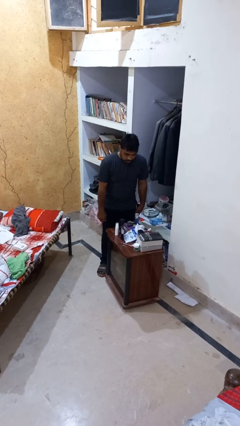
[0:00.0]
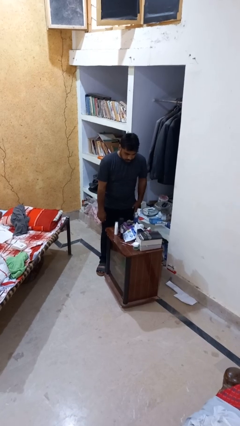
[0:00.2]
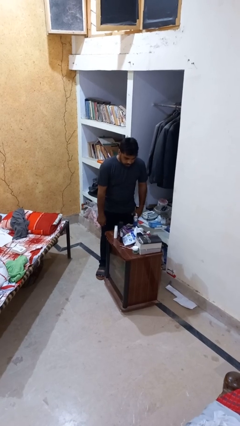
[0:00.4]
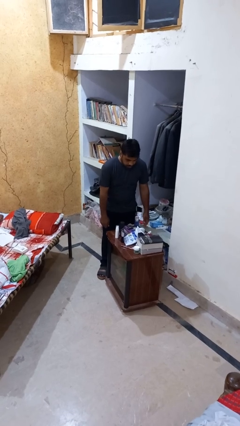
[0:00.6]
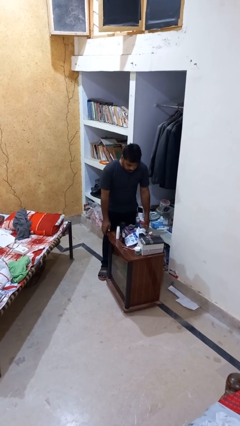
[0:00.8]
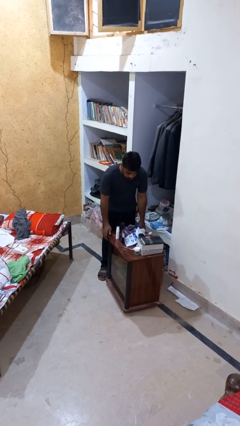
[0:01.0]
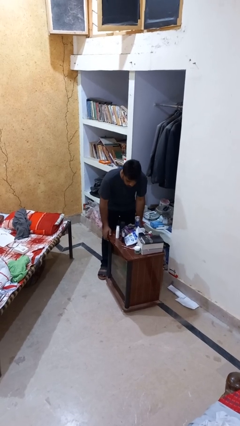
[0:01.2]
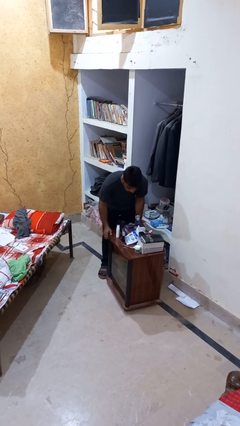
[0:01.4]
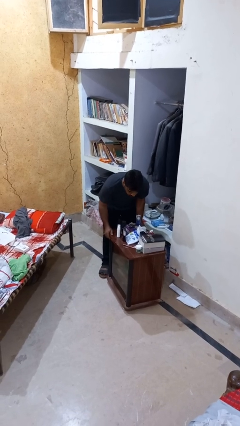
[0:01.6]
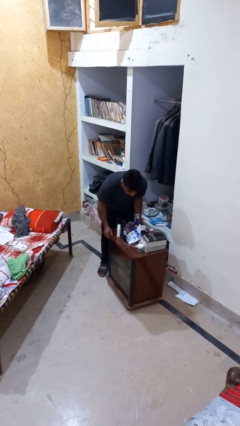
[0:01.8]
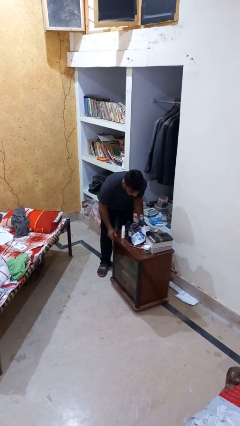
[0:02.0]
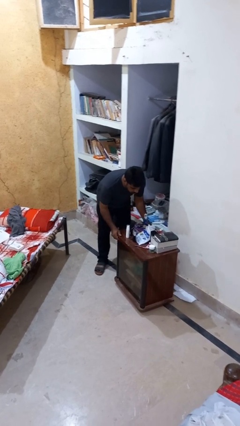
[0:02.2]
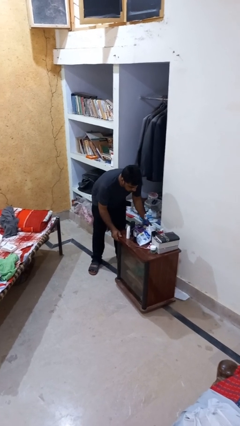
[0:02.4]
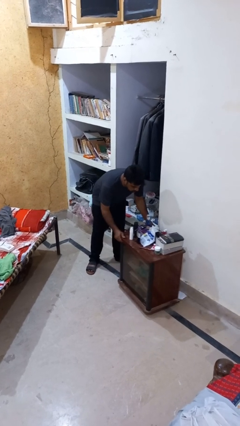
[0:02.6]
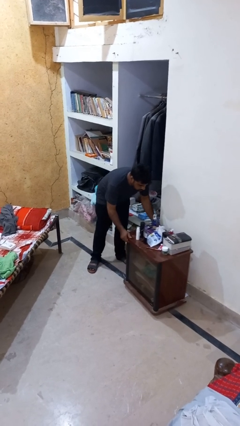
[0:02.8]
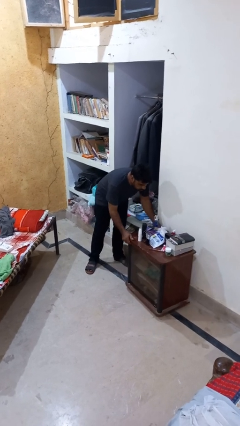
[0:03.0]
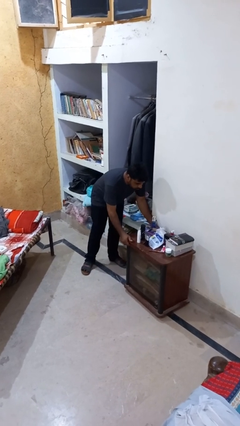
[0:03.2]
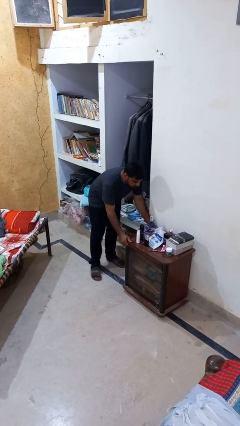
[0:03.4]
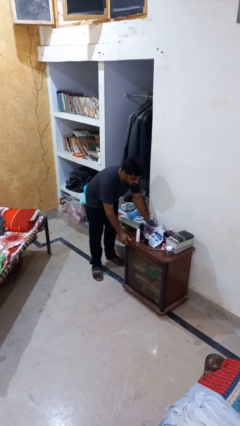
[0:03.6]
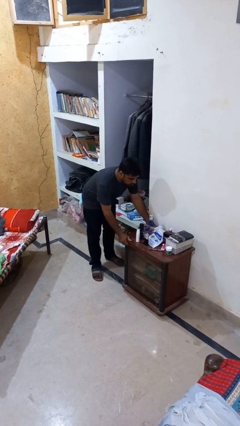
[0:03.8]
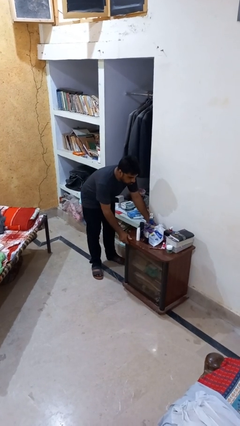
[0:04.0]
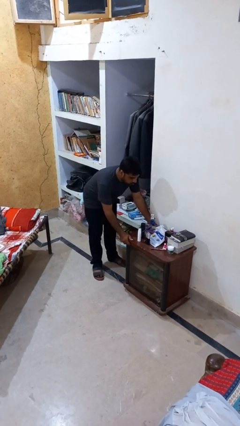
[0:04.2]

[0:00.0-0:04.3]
person pushes wheeled cart

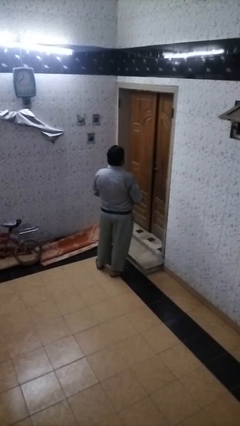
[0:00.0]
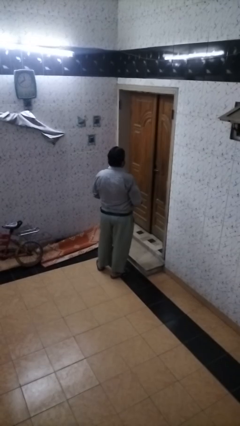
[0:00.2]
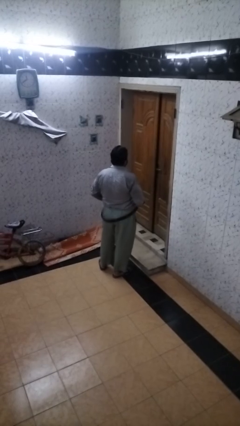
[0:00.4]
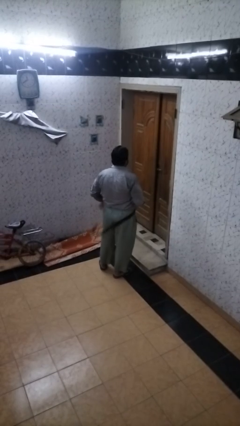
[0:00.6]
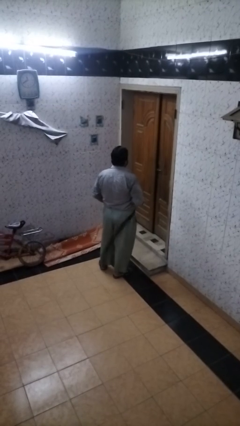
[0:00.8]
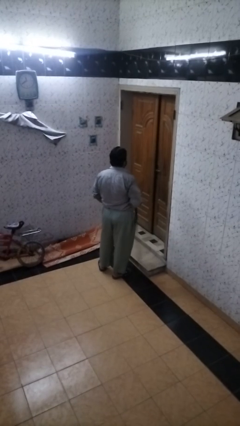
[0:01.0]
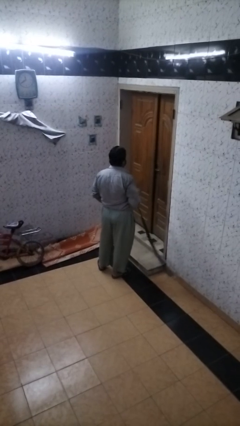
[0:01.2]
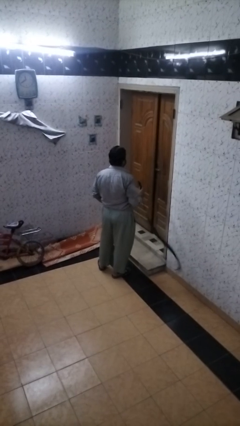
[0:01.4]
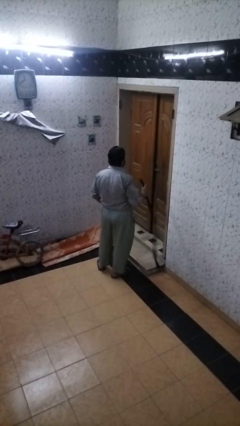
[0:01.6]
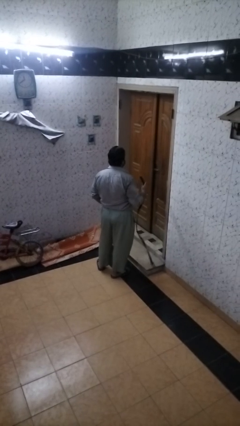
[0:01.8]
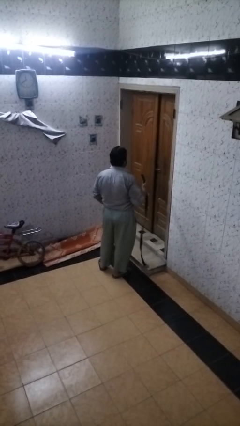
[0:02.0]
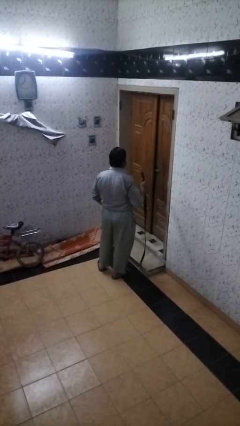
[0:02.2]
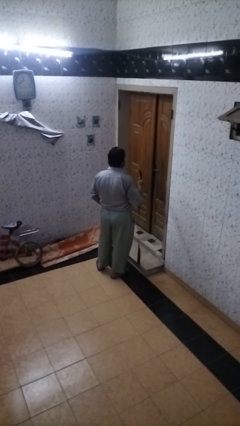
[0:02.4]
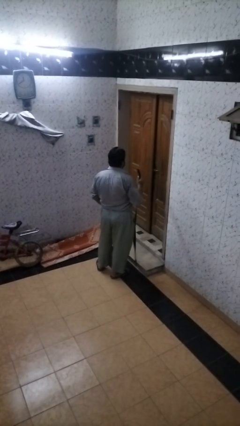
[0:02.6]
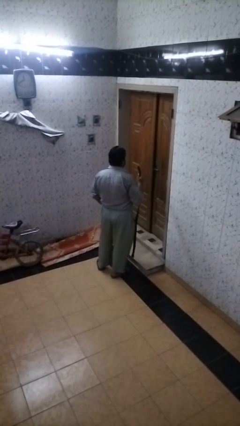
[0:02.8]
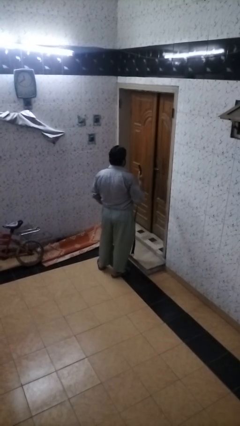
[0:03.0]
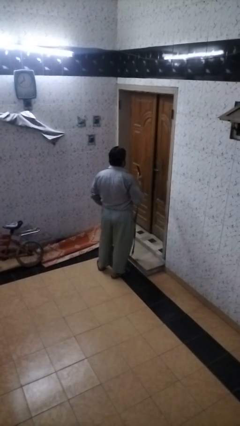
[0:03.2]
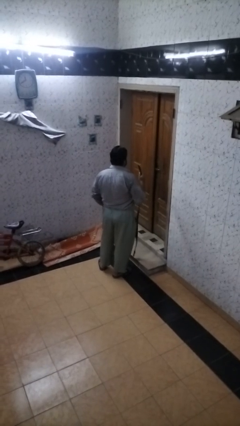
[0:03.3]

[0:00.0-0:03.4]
person takes off belt

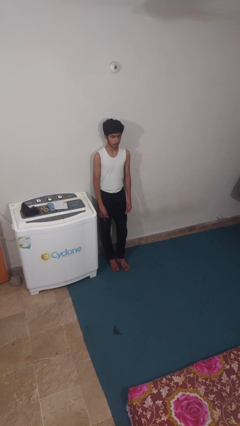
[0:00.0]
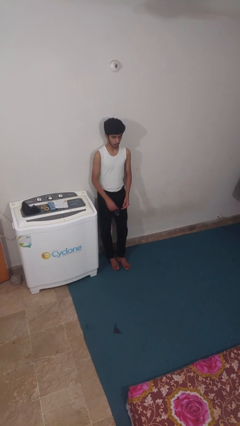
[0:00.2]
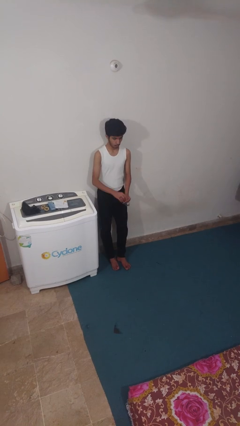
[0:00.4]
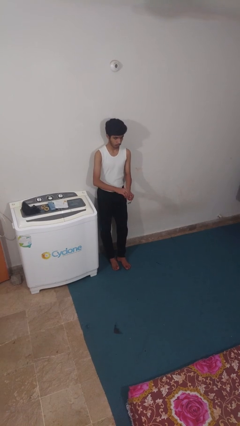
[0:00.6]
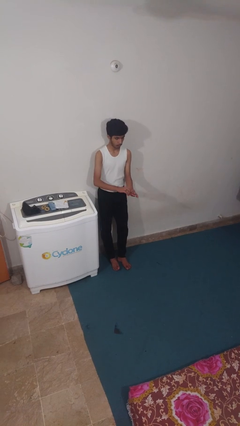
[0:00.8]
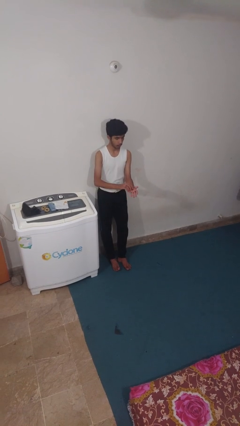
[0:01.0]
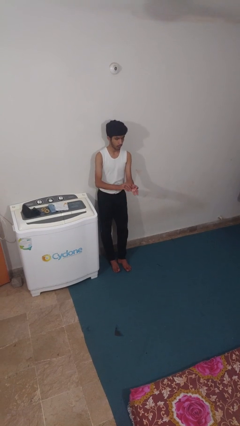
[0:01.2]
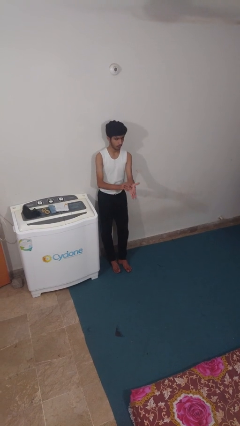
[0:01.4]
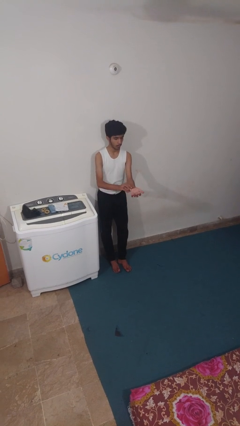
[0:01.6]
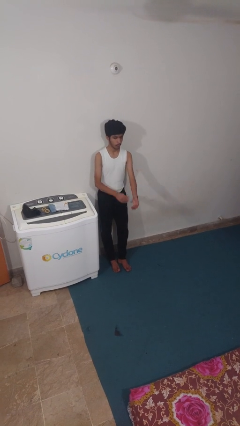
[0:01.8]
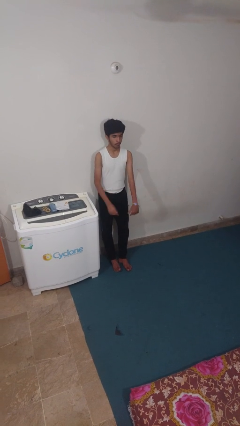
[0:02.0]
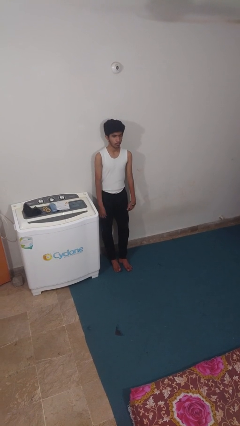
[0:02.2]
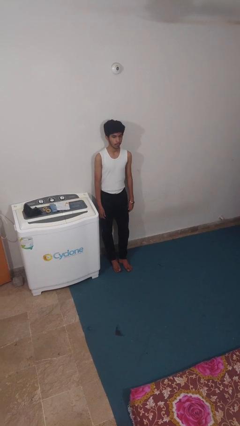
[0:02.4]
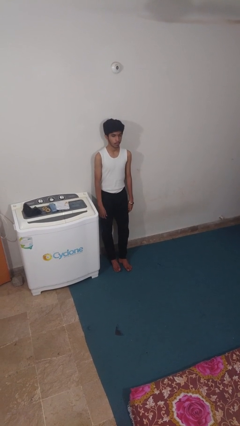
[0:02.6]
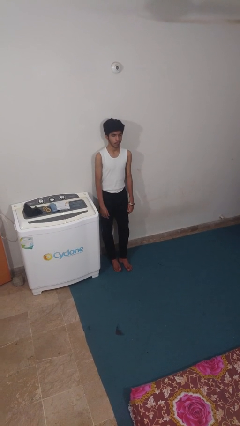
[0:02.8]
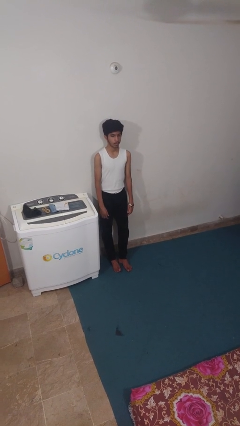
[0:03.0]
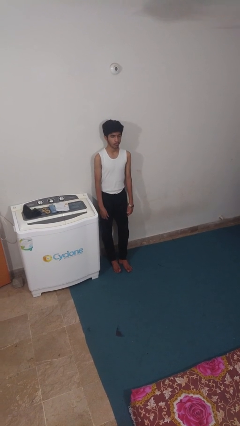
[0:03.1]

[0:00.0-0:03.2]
person puts on wristwatch

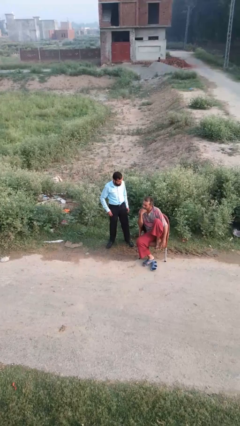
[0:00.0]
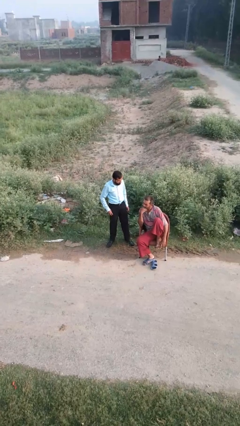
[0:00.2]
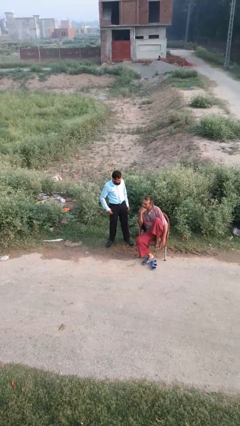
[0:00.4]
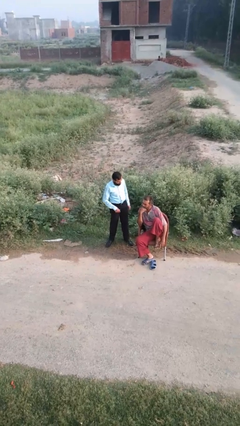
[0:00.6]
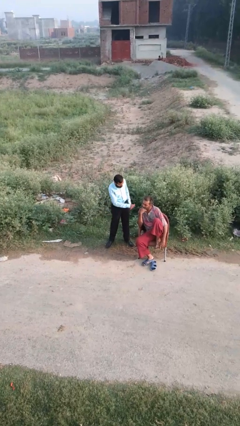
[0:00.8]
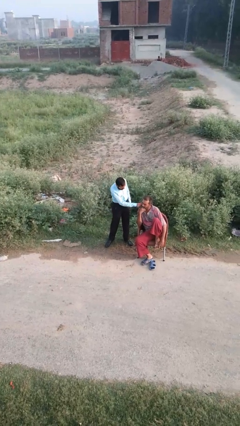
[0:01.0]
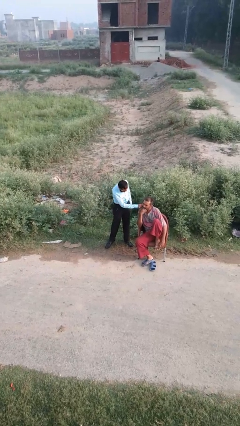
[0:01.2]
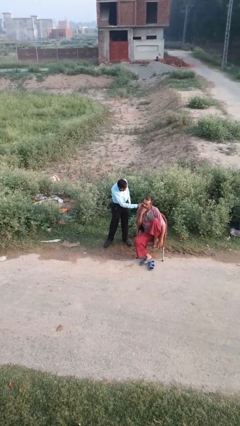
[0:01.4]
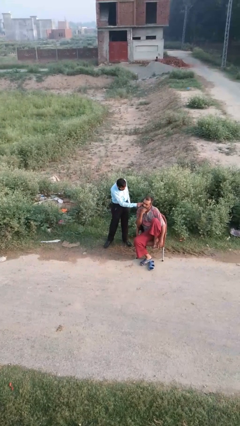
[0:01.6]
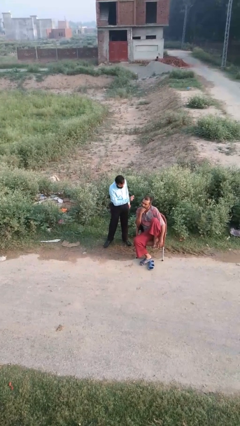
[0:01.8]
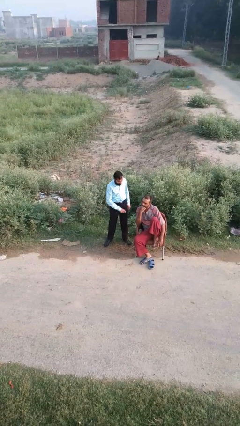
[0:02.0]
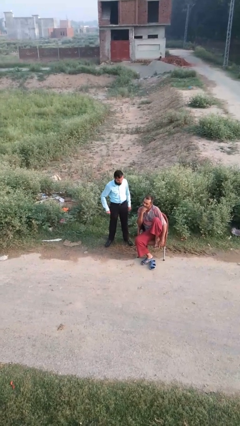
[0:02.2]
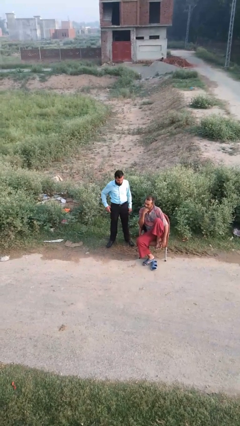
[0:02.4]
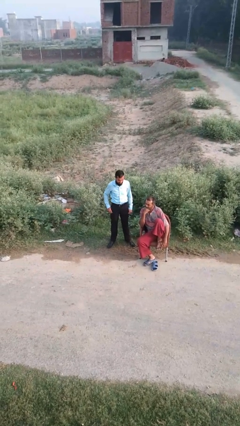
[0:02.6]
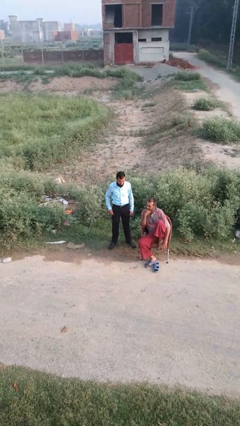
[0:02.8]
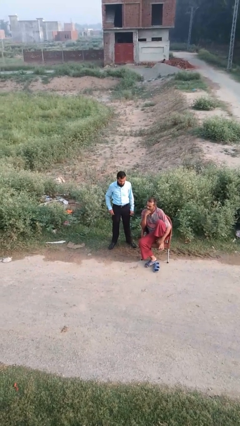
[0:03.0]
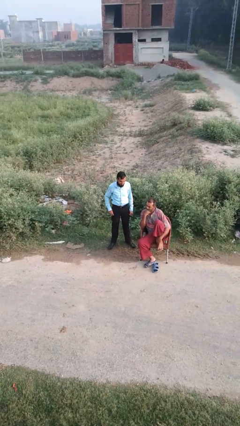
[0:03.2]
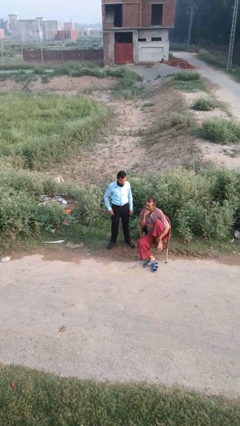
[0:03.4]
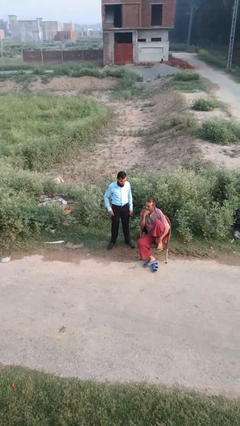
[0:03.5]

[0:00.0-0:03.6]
person touches face of person

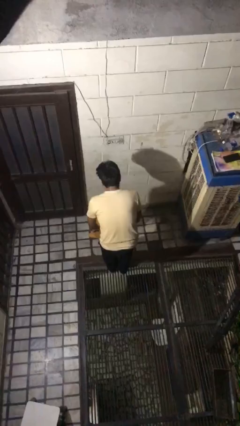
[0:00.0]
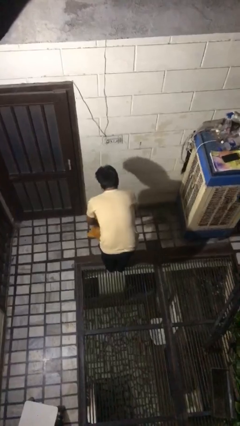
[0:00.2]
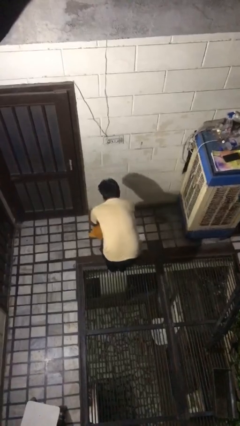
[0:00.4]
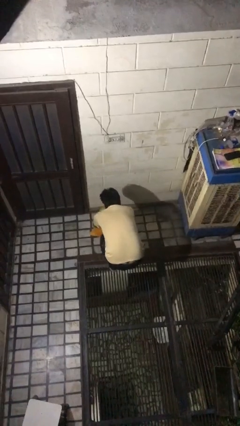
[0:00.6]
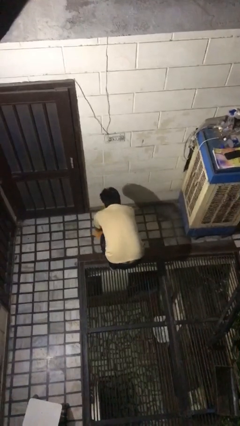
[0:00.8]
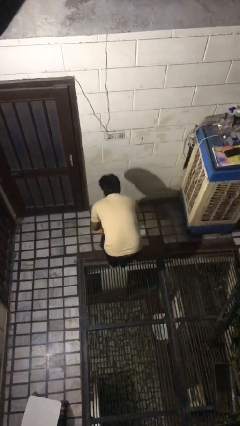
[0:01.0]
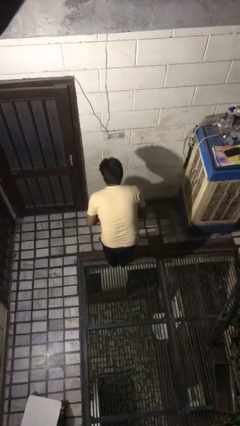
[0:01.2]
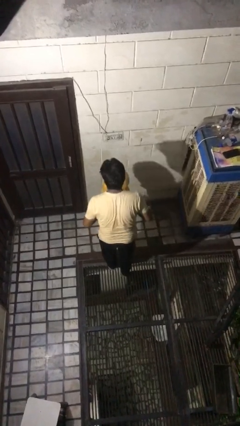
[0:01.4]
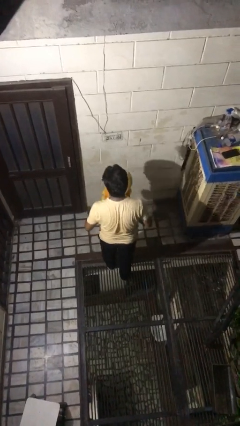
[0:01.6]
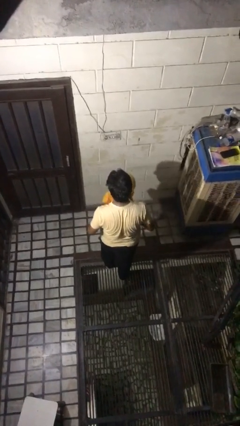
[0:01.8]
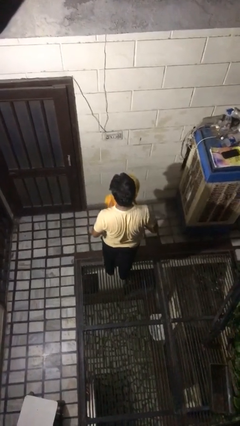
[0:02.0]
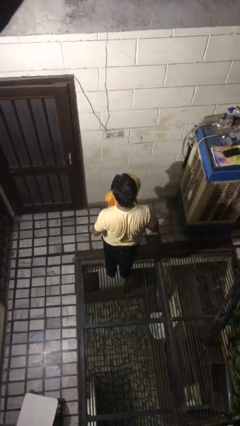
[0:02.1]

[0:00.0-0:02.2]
person picks up object from floor

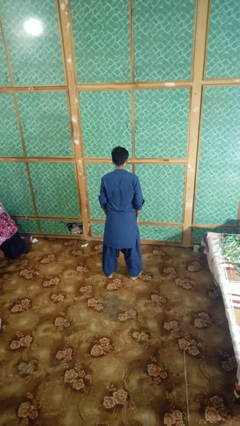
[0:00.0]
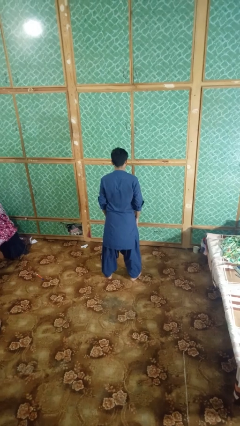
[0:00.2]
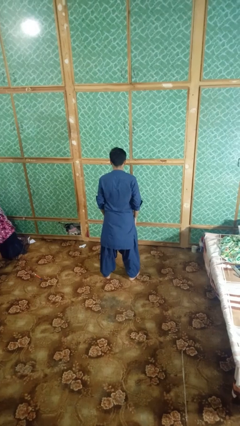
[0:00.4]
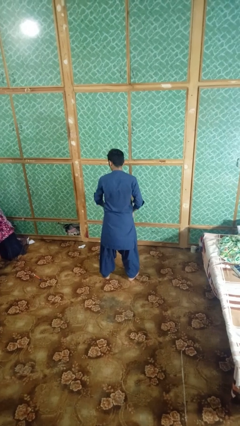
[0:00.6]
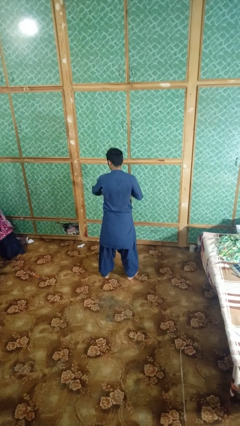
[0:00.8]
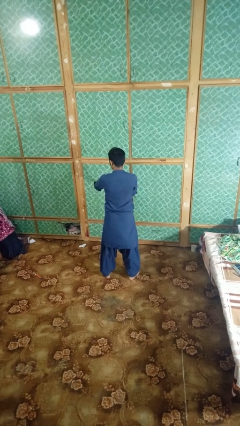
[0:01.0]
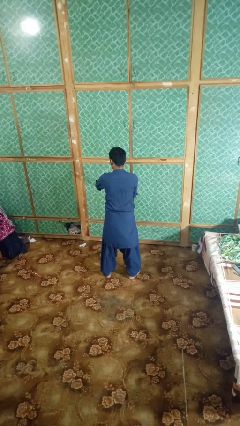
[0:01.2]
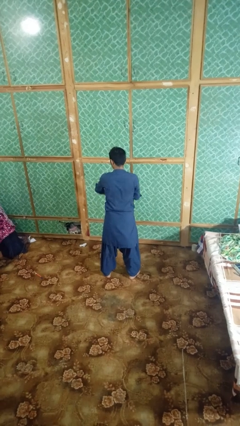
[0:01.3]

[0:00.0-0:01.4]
person swats bug
